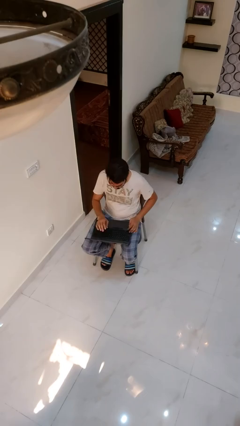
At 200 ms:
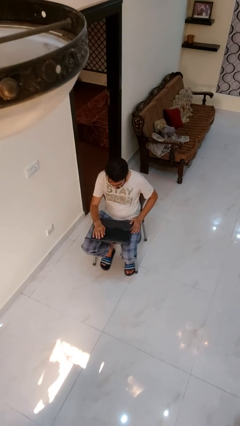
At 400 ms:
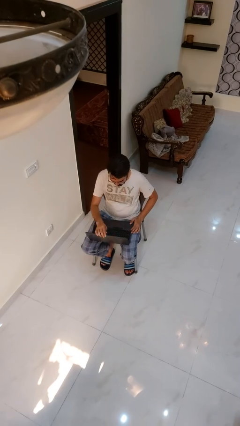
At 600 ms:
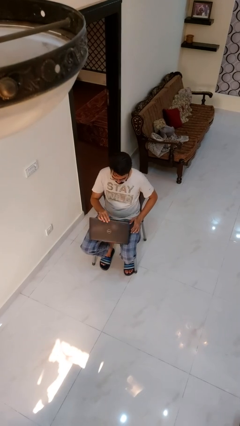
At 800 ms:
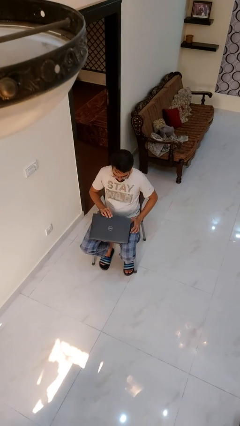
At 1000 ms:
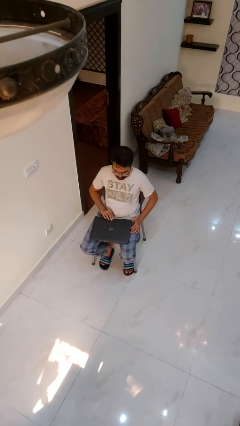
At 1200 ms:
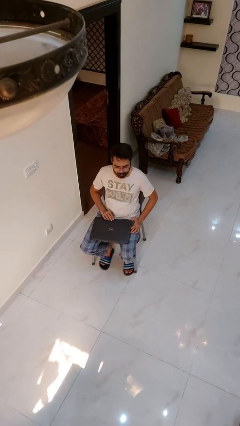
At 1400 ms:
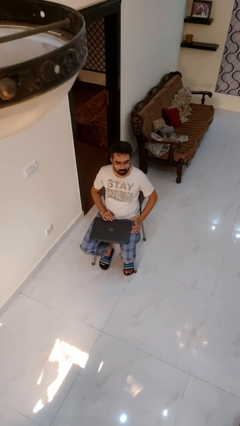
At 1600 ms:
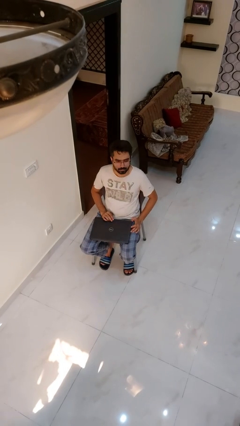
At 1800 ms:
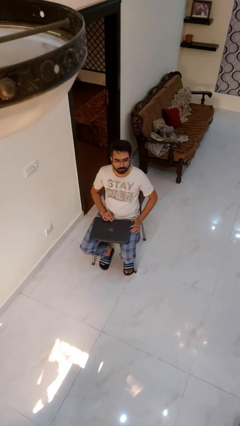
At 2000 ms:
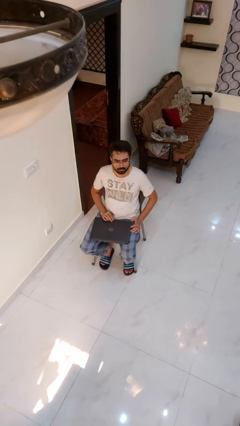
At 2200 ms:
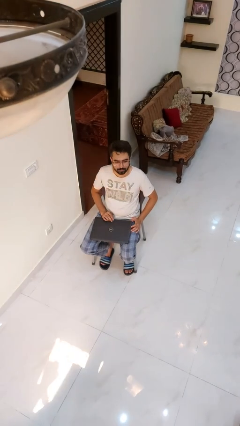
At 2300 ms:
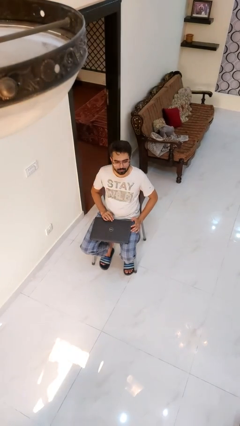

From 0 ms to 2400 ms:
person closes laptop

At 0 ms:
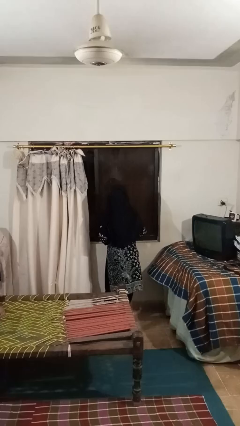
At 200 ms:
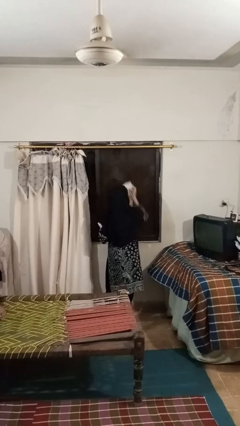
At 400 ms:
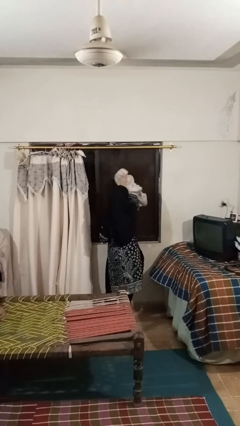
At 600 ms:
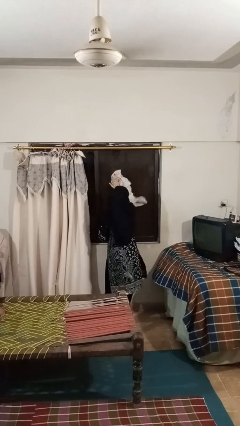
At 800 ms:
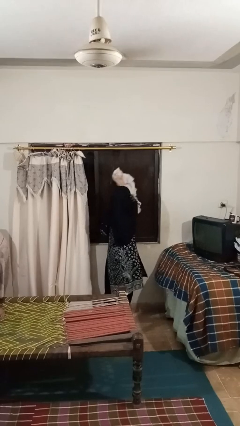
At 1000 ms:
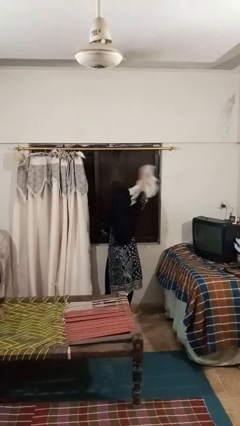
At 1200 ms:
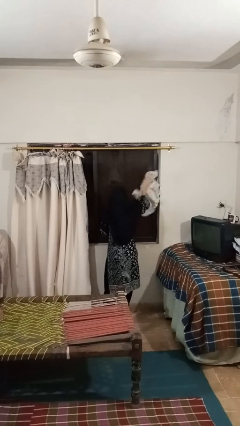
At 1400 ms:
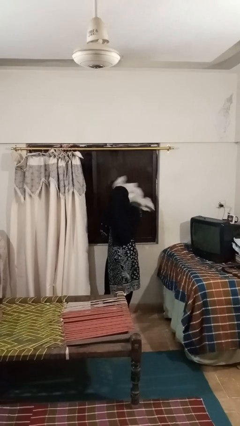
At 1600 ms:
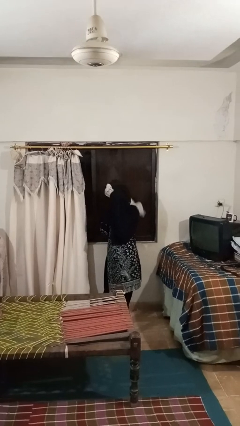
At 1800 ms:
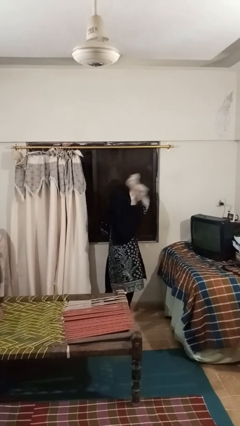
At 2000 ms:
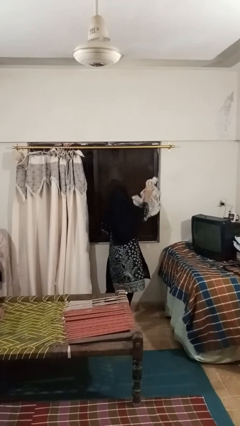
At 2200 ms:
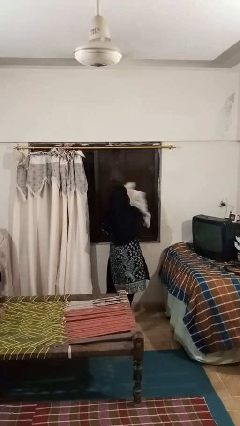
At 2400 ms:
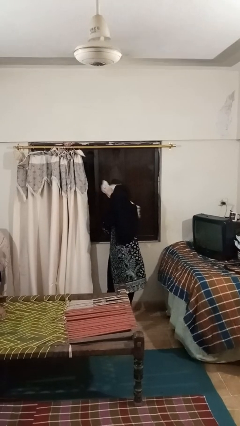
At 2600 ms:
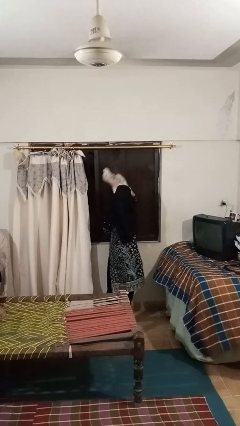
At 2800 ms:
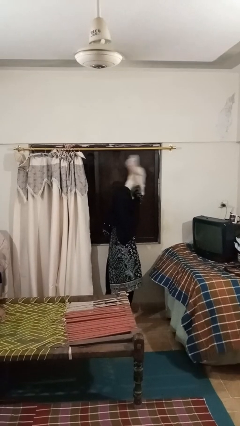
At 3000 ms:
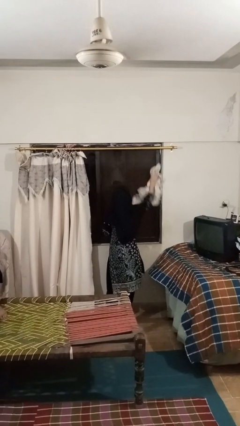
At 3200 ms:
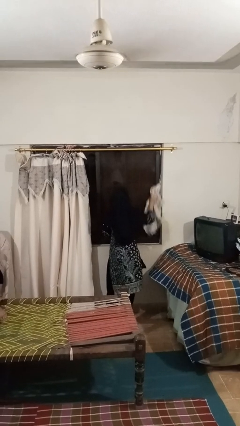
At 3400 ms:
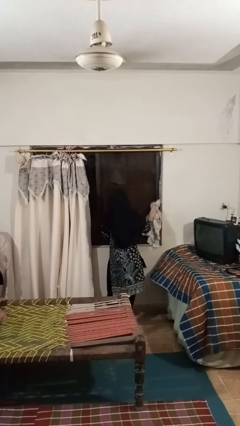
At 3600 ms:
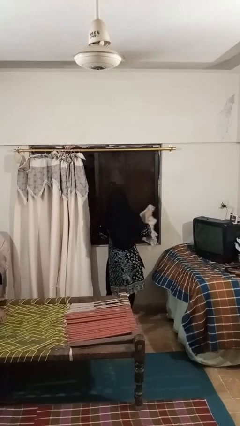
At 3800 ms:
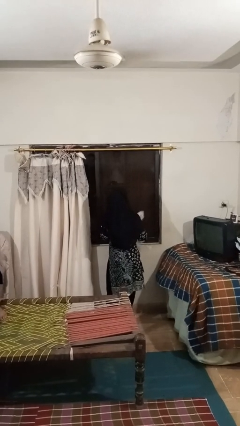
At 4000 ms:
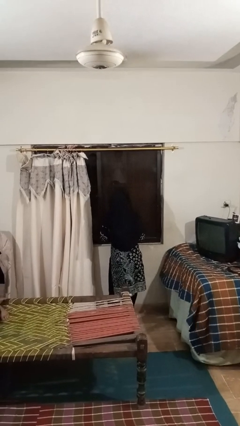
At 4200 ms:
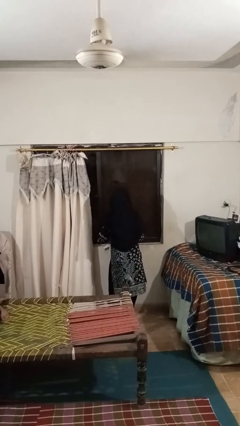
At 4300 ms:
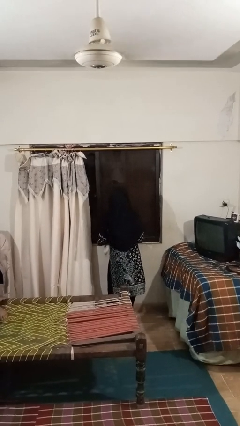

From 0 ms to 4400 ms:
person washes window

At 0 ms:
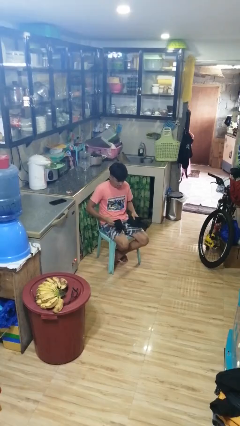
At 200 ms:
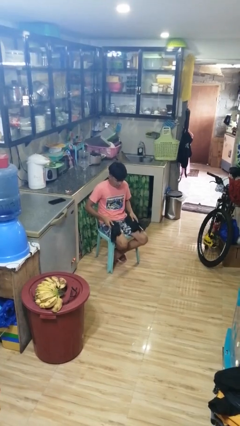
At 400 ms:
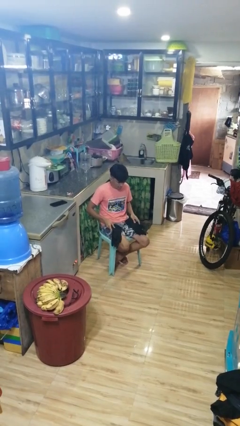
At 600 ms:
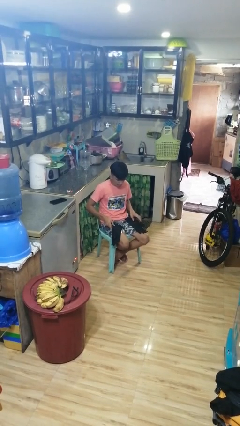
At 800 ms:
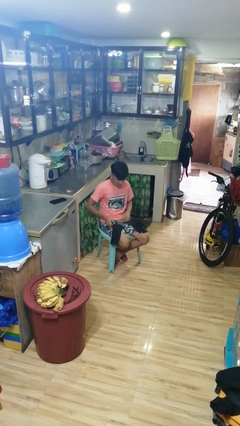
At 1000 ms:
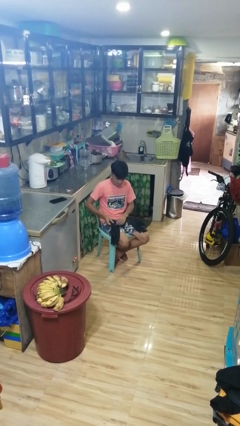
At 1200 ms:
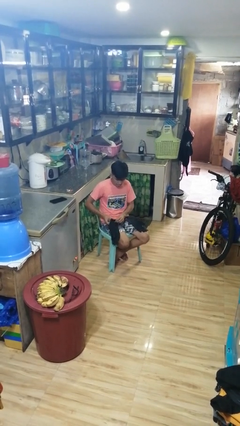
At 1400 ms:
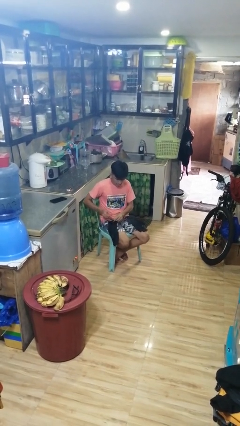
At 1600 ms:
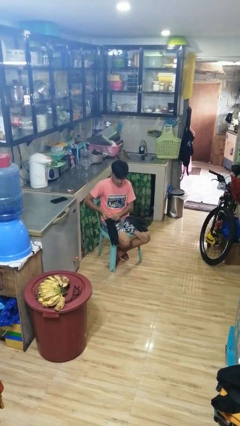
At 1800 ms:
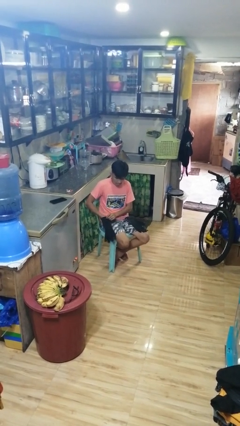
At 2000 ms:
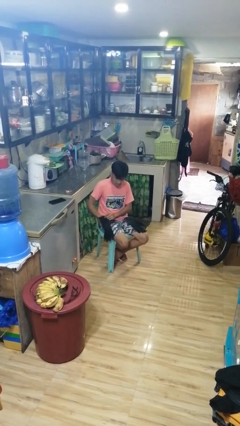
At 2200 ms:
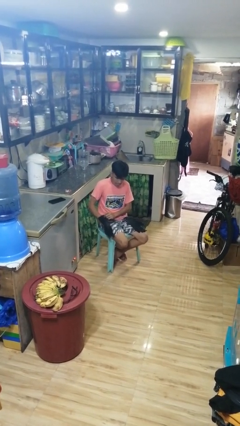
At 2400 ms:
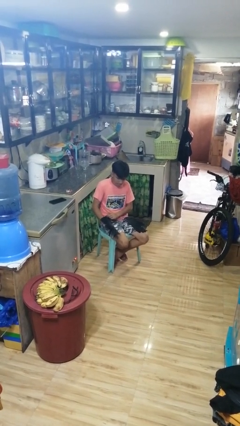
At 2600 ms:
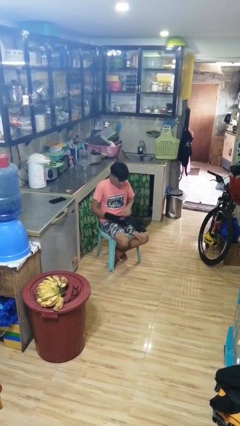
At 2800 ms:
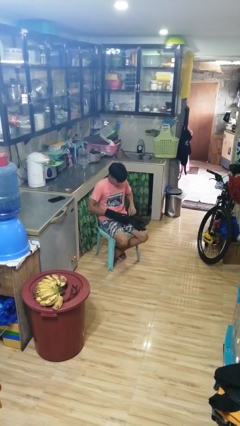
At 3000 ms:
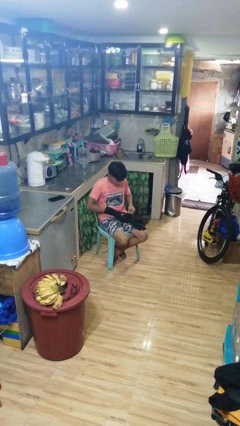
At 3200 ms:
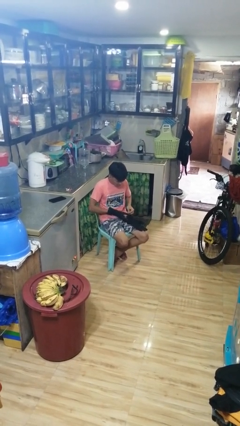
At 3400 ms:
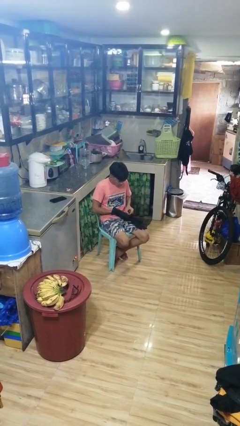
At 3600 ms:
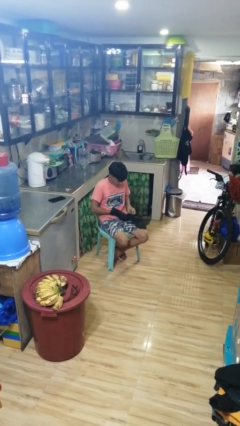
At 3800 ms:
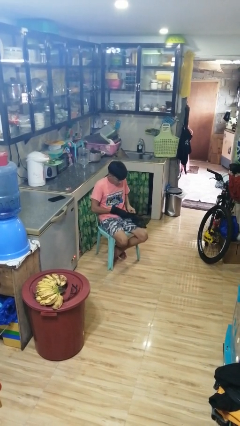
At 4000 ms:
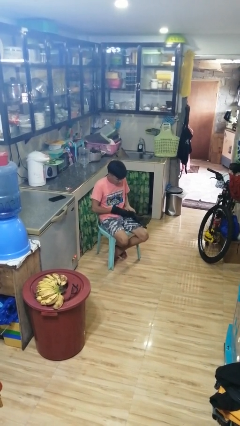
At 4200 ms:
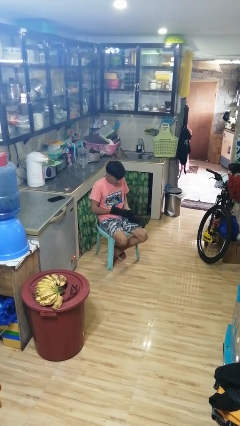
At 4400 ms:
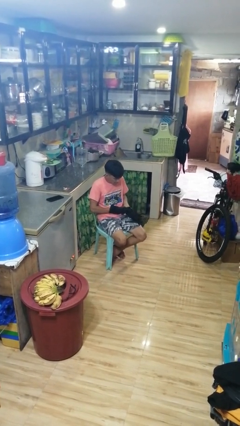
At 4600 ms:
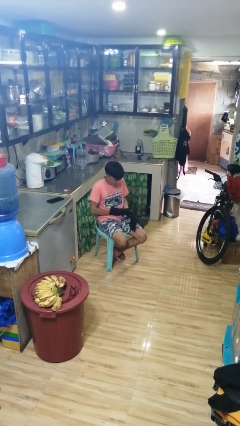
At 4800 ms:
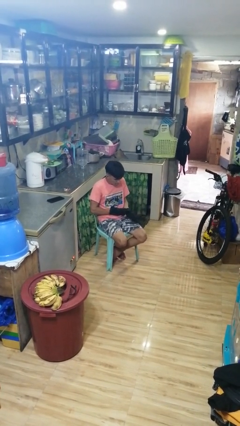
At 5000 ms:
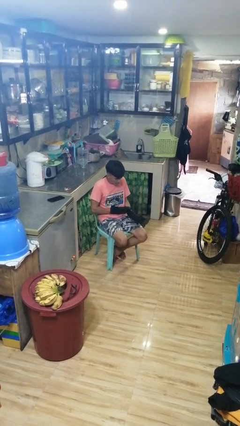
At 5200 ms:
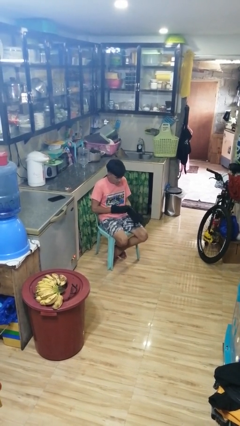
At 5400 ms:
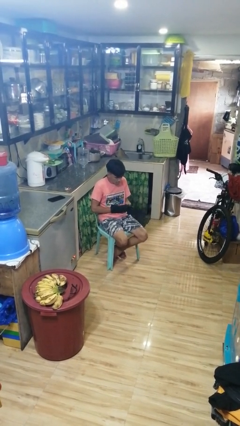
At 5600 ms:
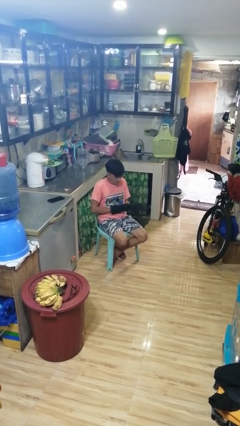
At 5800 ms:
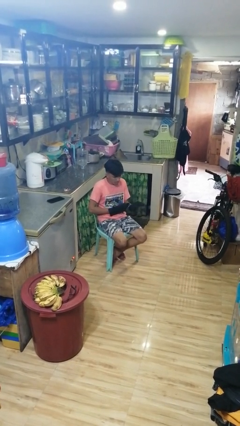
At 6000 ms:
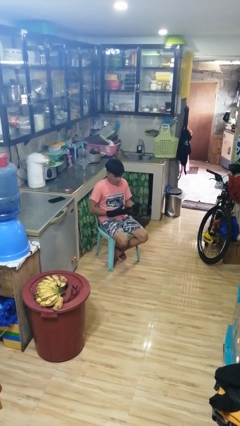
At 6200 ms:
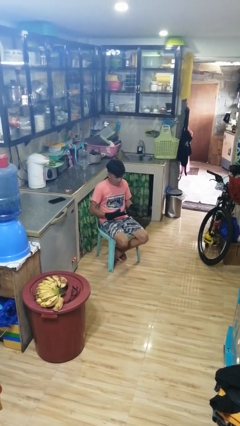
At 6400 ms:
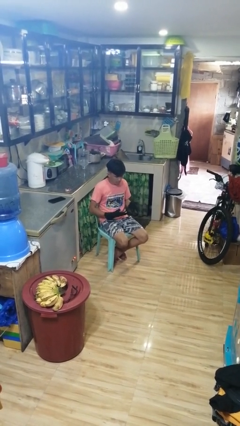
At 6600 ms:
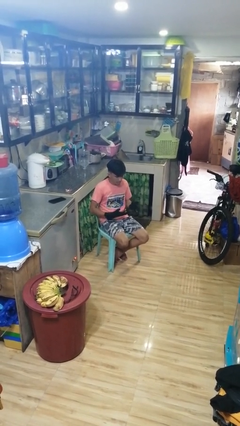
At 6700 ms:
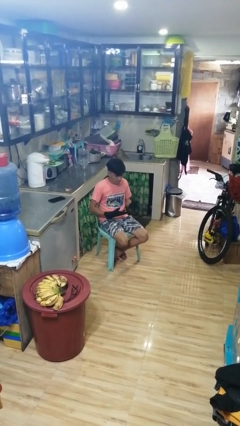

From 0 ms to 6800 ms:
person puts on gloves

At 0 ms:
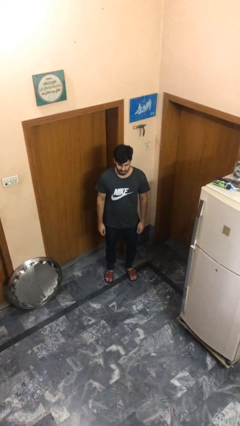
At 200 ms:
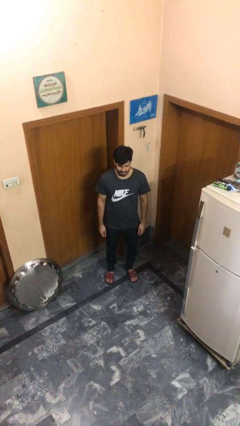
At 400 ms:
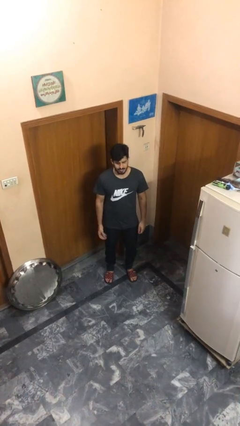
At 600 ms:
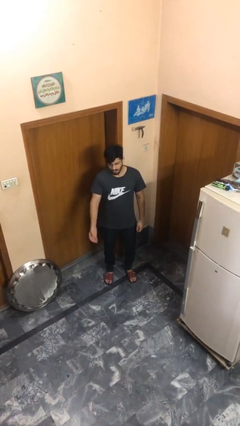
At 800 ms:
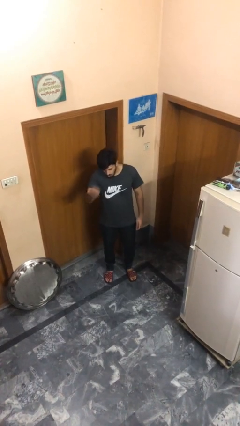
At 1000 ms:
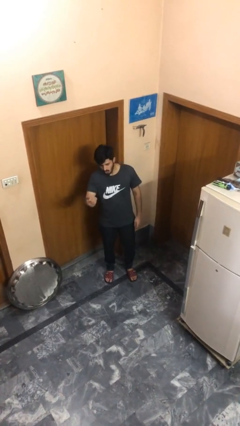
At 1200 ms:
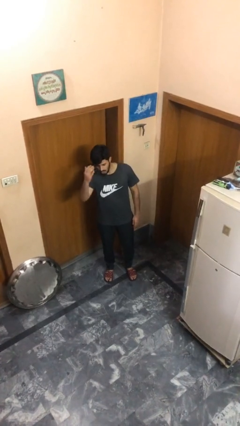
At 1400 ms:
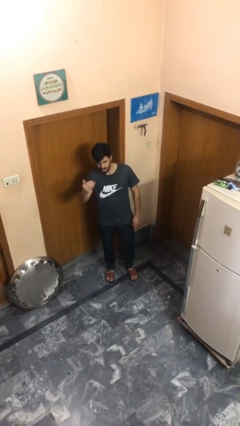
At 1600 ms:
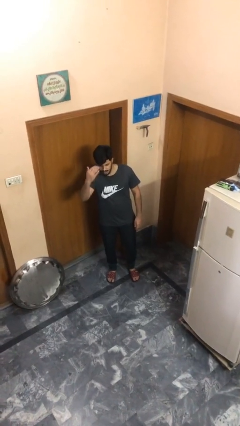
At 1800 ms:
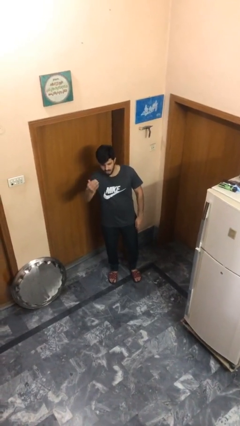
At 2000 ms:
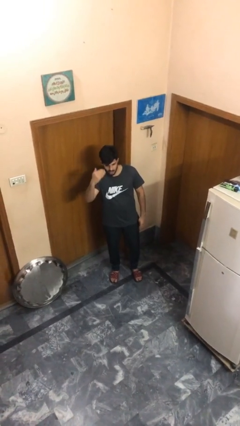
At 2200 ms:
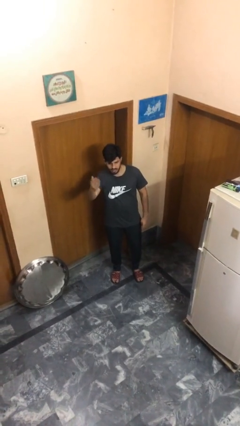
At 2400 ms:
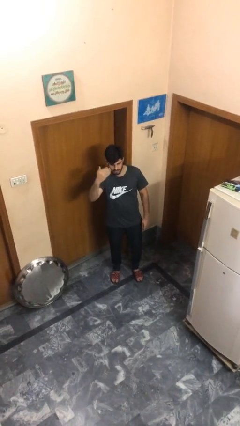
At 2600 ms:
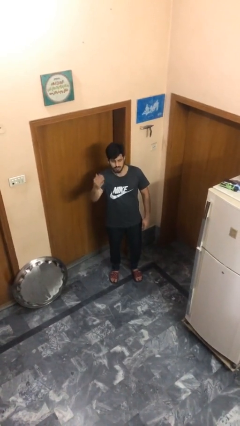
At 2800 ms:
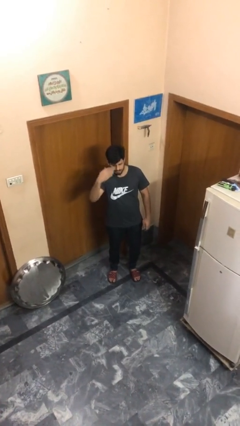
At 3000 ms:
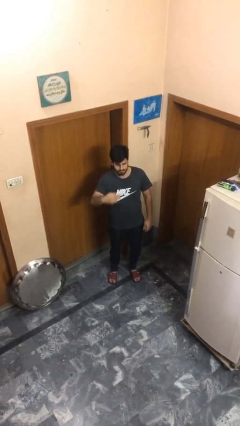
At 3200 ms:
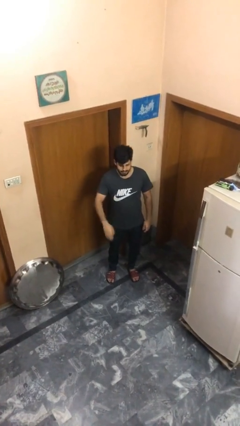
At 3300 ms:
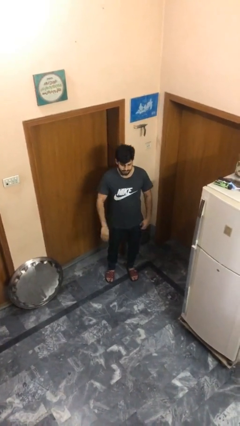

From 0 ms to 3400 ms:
person gestures come here

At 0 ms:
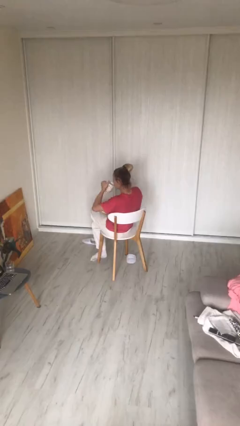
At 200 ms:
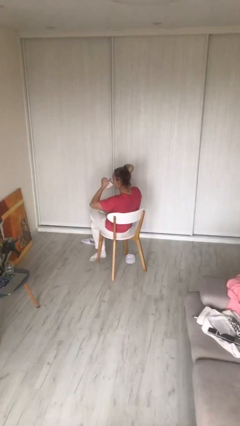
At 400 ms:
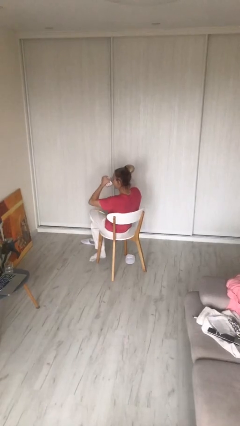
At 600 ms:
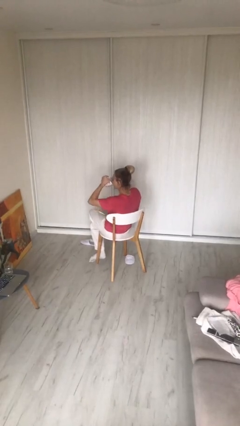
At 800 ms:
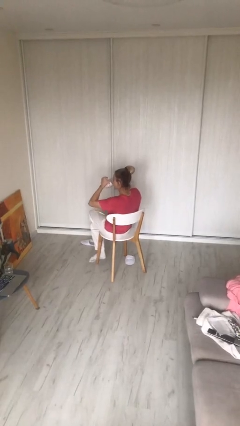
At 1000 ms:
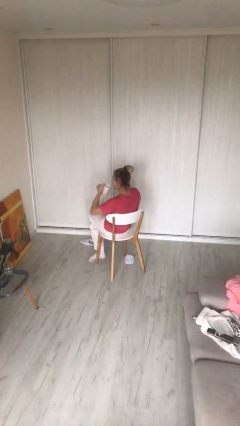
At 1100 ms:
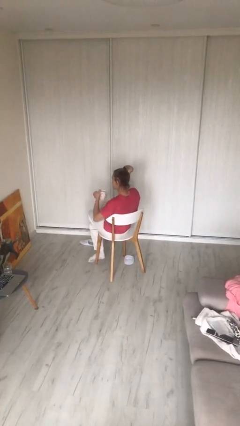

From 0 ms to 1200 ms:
person drinks from mug
